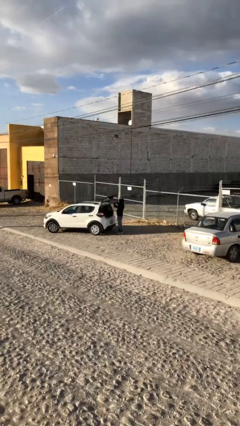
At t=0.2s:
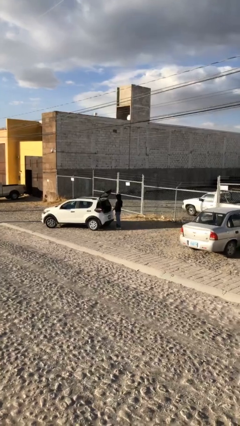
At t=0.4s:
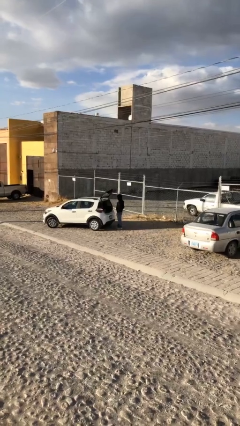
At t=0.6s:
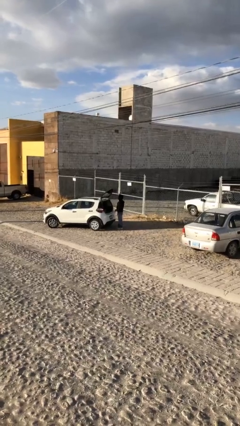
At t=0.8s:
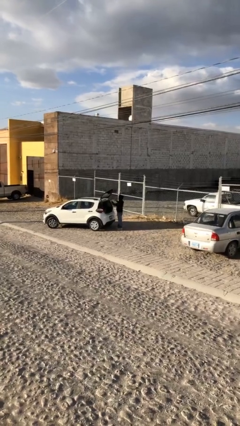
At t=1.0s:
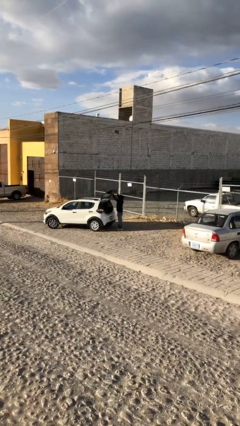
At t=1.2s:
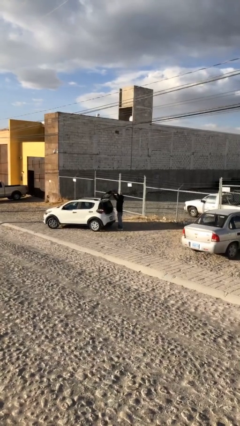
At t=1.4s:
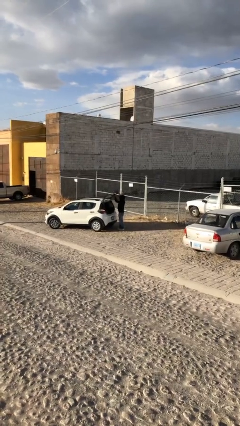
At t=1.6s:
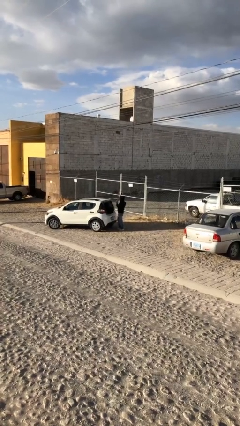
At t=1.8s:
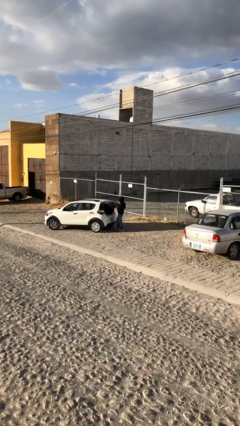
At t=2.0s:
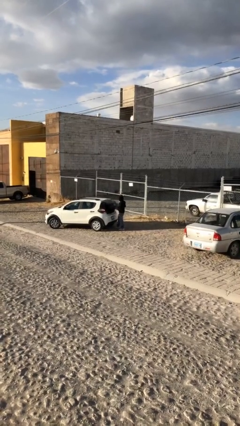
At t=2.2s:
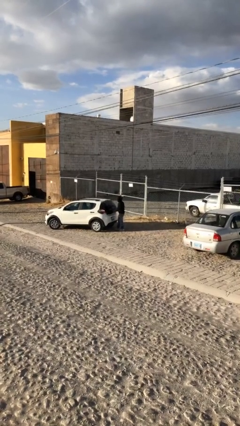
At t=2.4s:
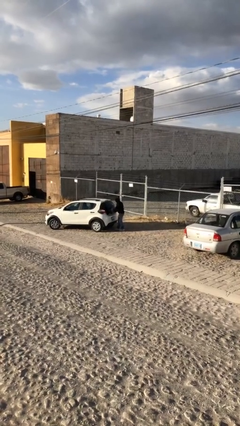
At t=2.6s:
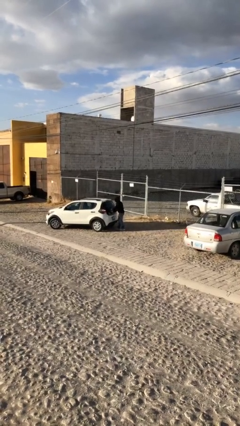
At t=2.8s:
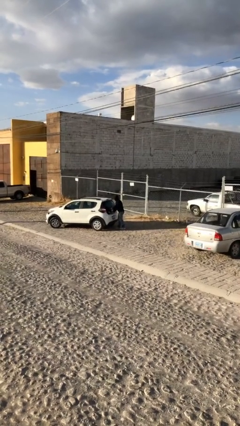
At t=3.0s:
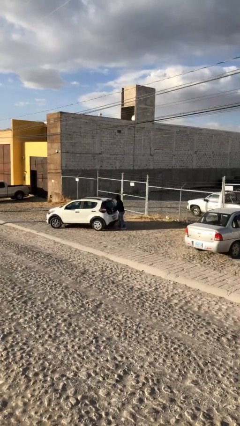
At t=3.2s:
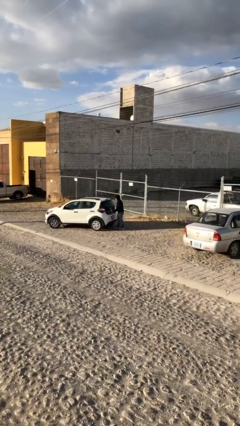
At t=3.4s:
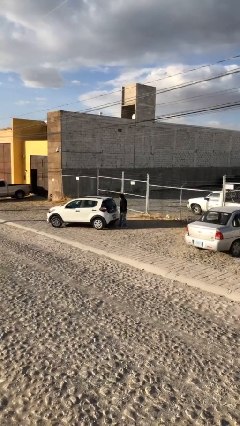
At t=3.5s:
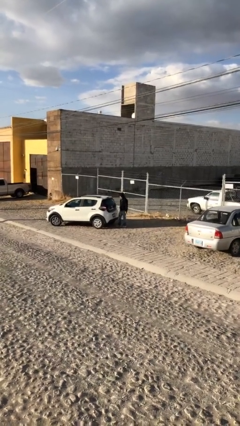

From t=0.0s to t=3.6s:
person closes car trunk

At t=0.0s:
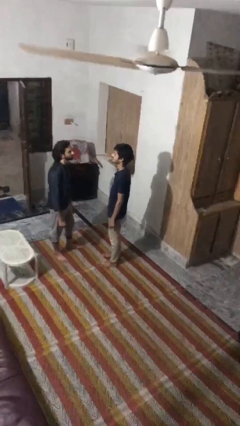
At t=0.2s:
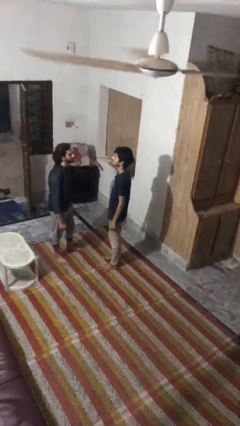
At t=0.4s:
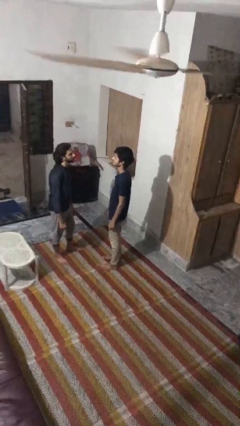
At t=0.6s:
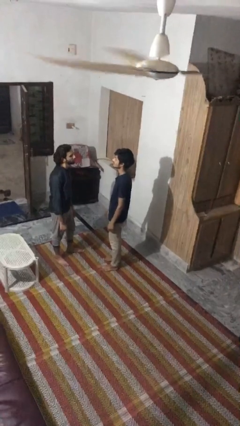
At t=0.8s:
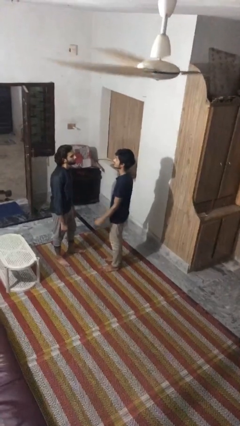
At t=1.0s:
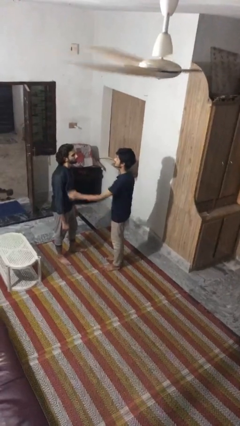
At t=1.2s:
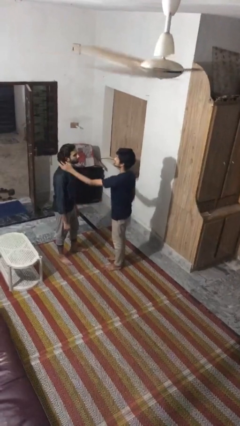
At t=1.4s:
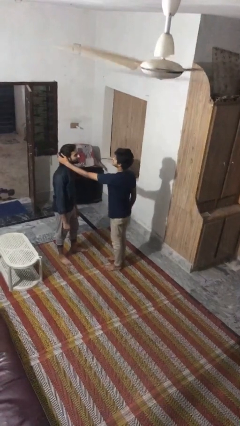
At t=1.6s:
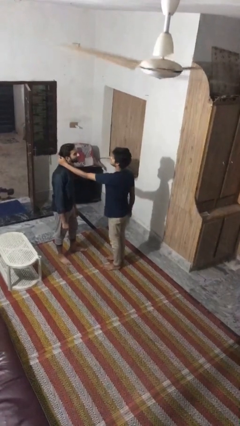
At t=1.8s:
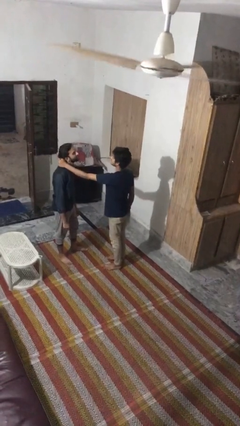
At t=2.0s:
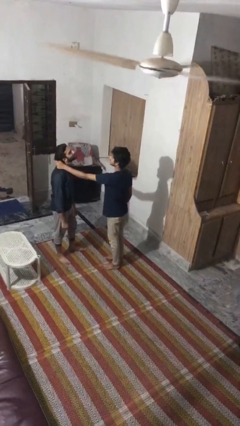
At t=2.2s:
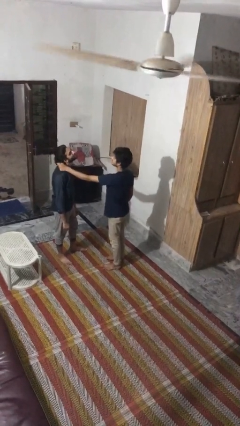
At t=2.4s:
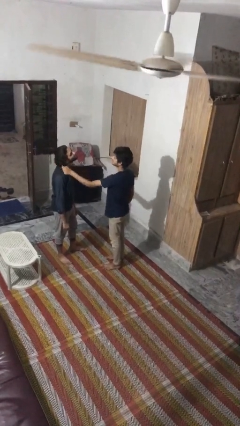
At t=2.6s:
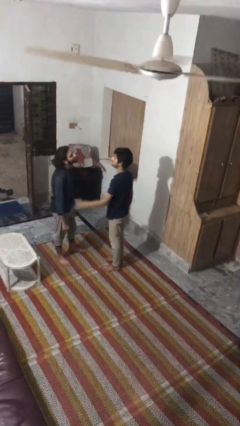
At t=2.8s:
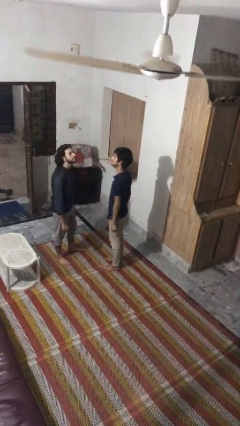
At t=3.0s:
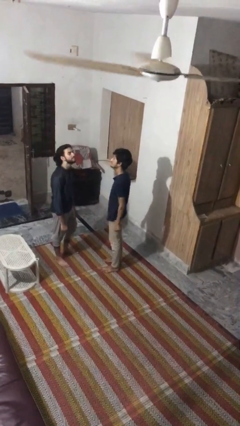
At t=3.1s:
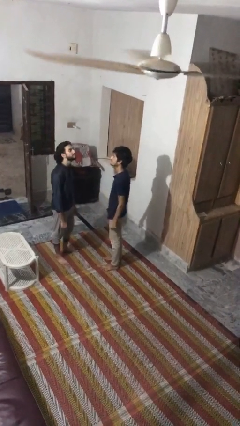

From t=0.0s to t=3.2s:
person grabs person by hair

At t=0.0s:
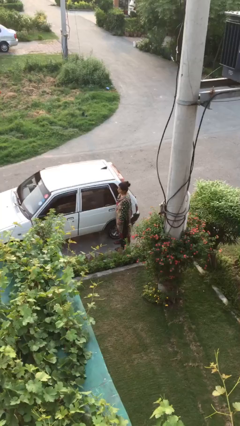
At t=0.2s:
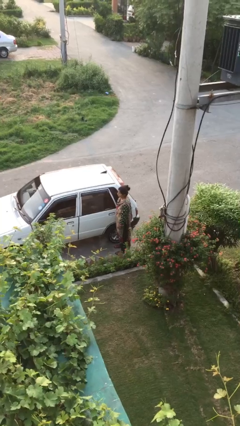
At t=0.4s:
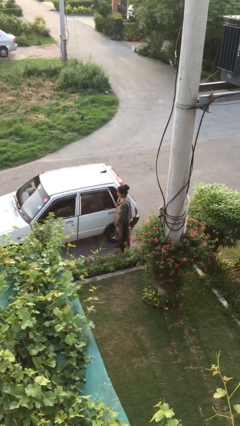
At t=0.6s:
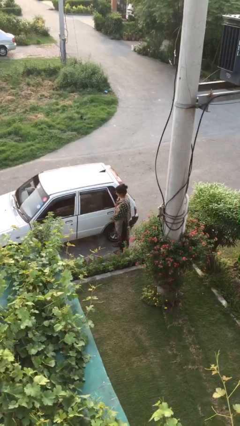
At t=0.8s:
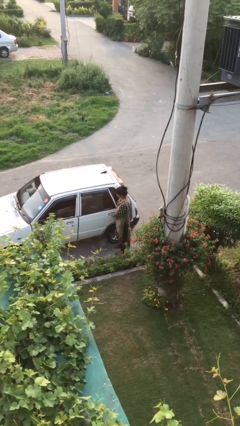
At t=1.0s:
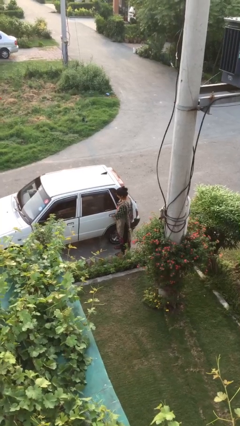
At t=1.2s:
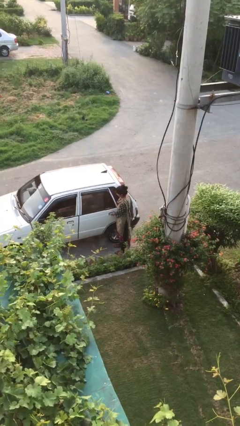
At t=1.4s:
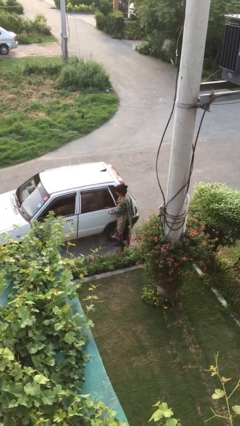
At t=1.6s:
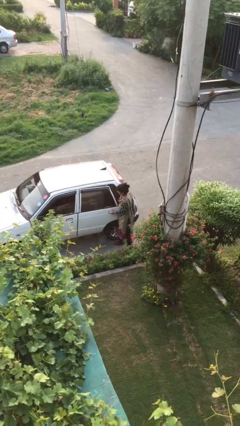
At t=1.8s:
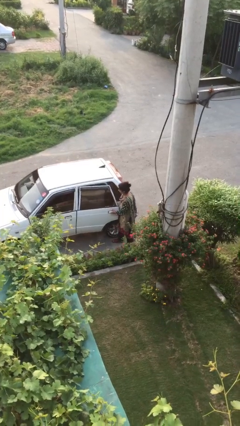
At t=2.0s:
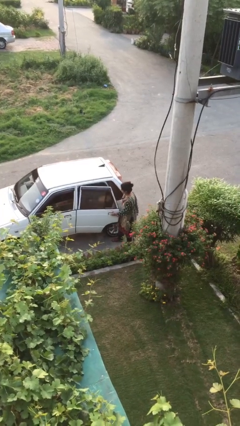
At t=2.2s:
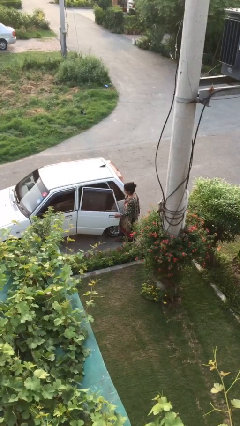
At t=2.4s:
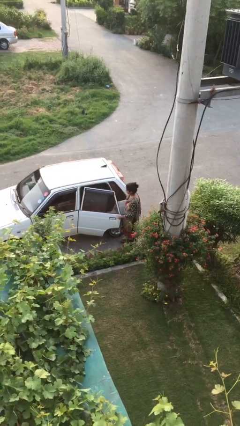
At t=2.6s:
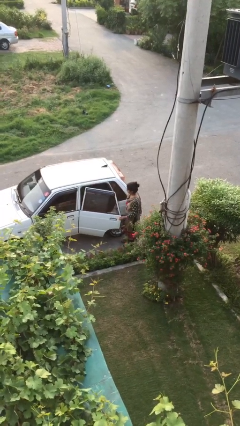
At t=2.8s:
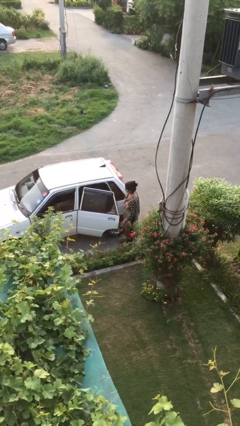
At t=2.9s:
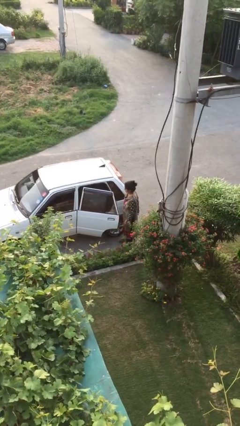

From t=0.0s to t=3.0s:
person opens car door

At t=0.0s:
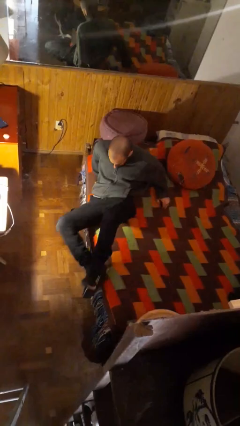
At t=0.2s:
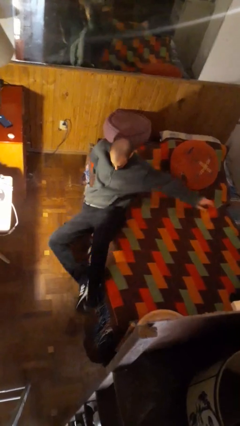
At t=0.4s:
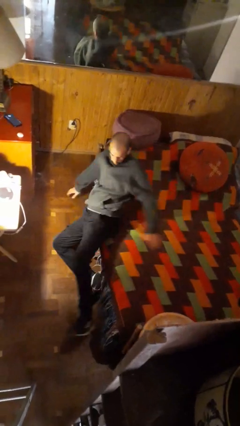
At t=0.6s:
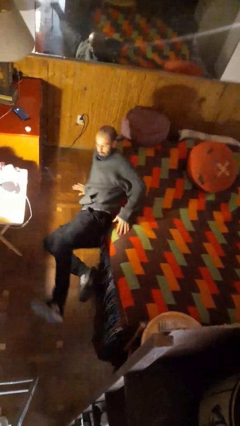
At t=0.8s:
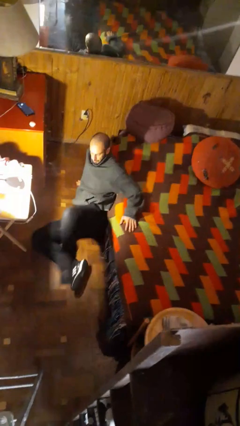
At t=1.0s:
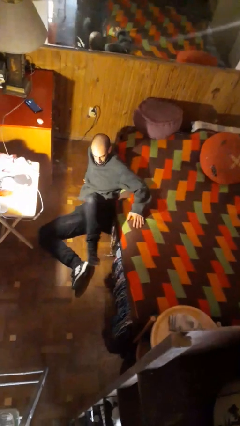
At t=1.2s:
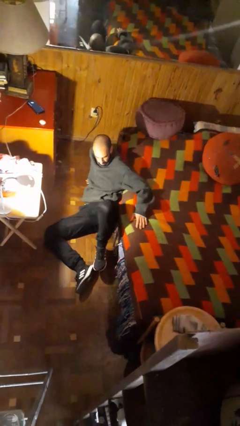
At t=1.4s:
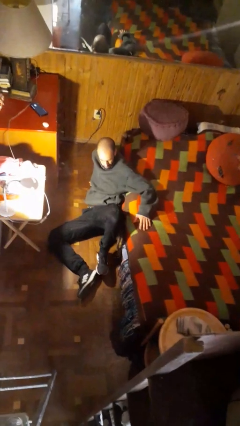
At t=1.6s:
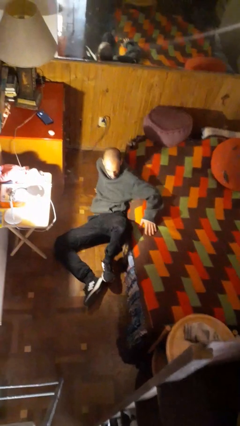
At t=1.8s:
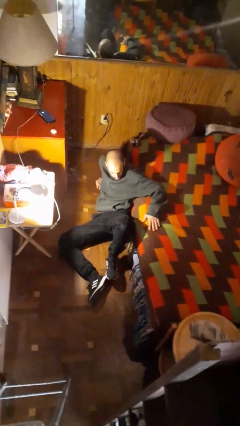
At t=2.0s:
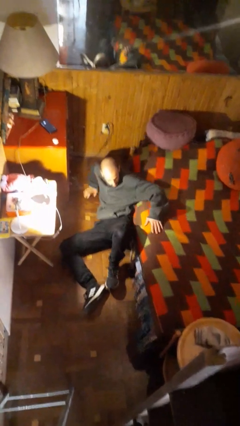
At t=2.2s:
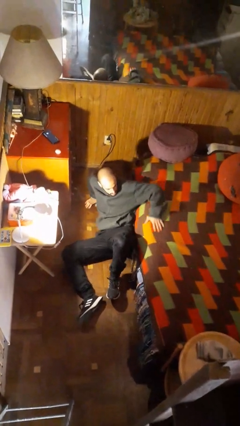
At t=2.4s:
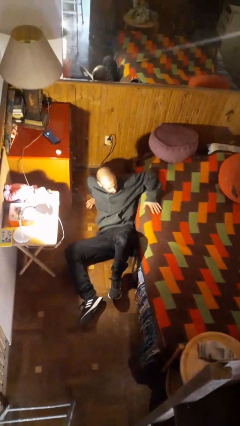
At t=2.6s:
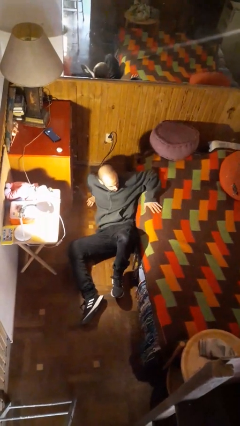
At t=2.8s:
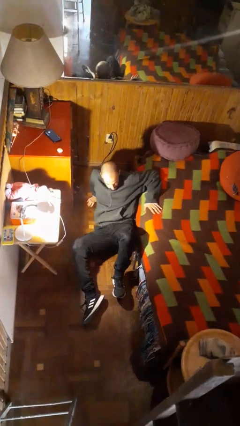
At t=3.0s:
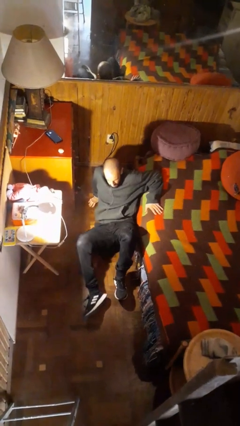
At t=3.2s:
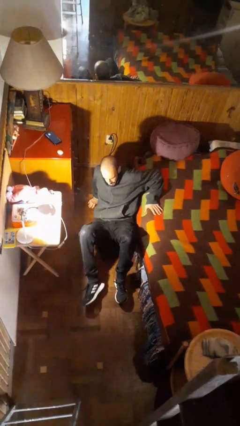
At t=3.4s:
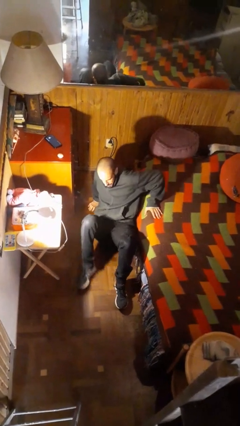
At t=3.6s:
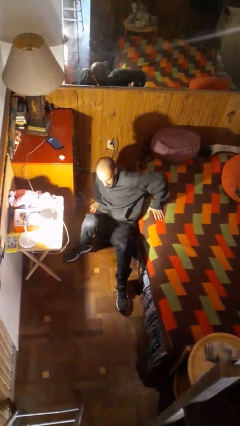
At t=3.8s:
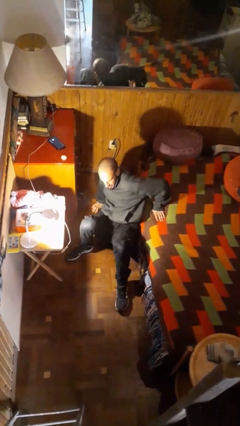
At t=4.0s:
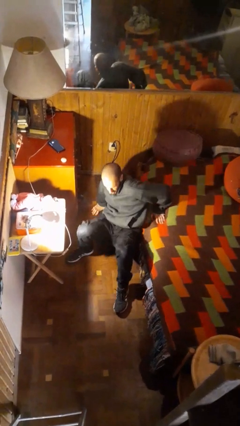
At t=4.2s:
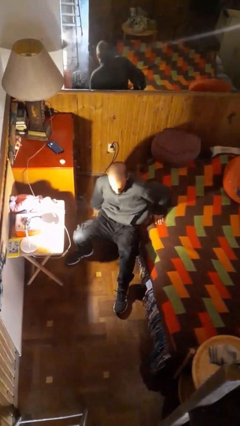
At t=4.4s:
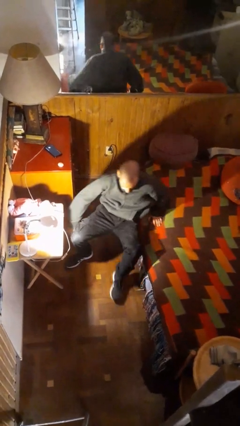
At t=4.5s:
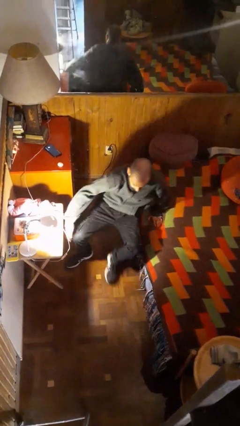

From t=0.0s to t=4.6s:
person falls from bed

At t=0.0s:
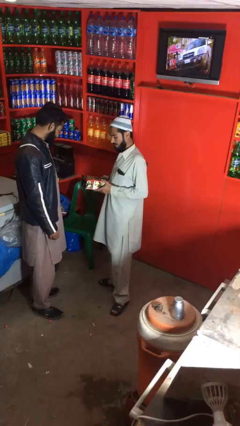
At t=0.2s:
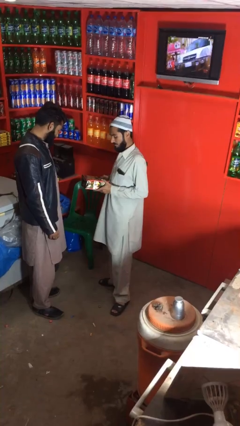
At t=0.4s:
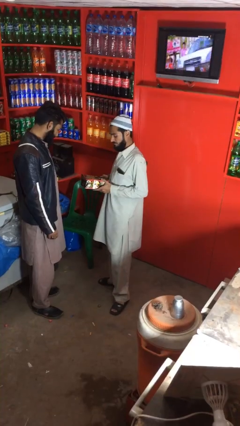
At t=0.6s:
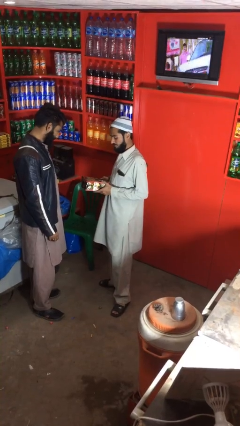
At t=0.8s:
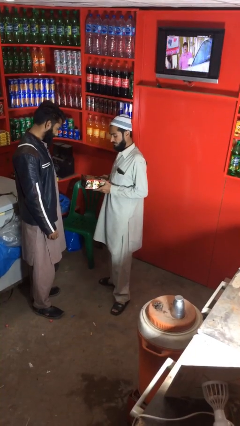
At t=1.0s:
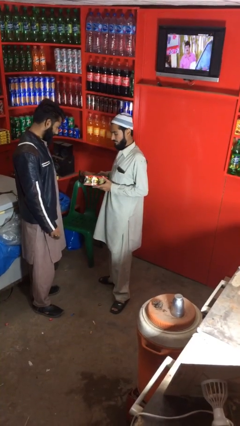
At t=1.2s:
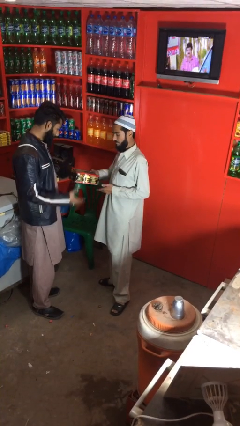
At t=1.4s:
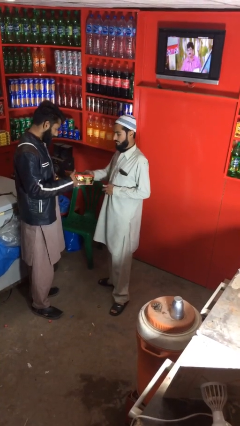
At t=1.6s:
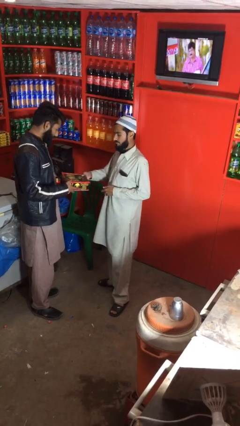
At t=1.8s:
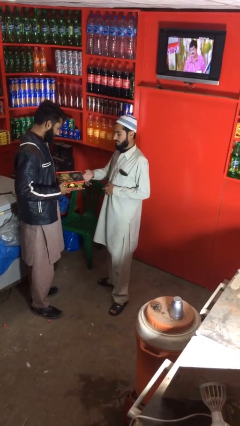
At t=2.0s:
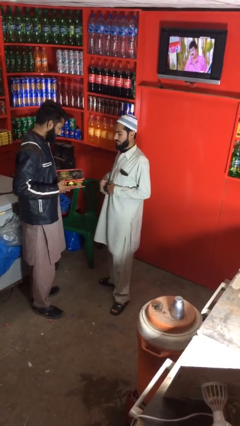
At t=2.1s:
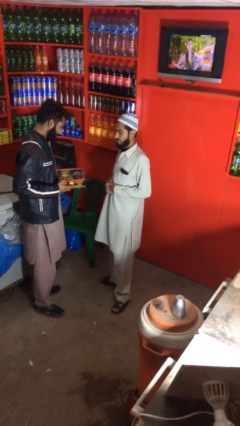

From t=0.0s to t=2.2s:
person transfers object to person

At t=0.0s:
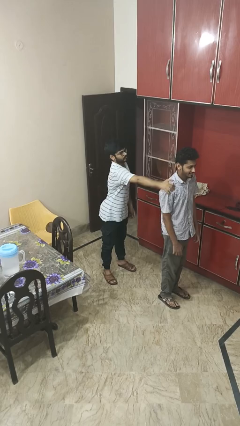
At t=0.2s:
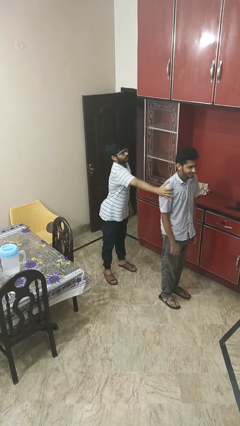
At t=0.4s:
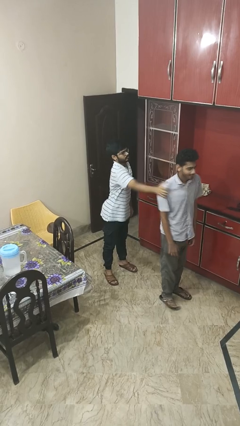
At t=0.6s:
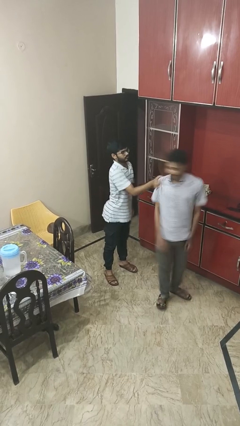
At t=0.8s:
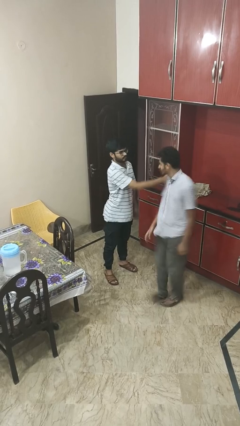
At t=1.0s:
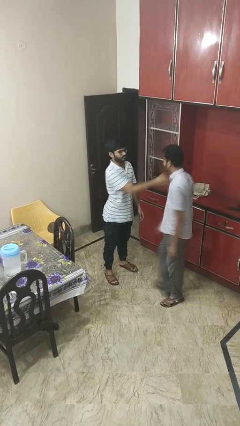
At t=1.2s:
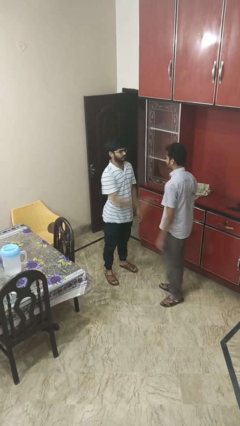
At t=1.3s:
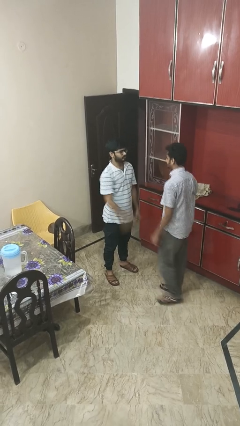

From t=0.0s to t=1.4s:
person spins person around
